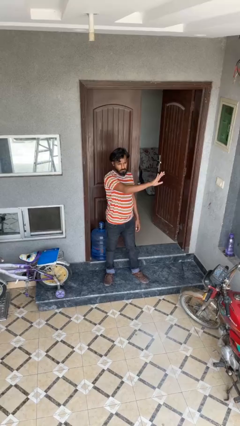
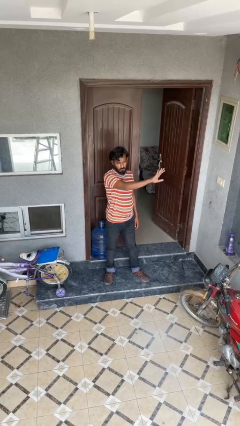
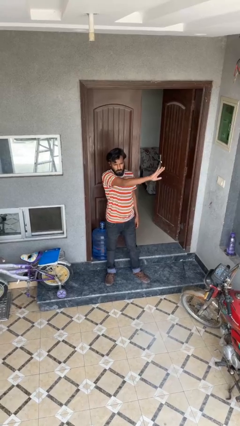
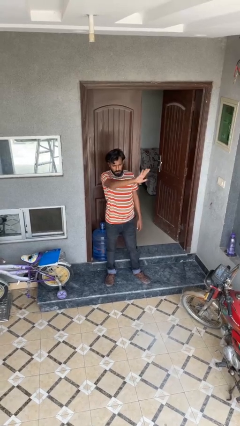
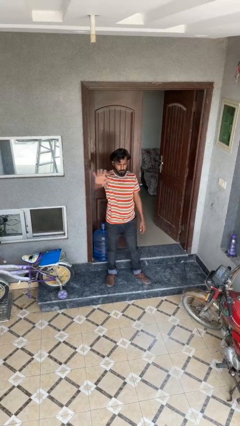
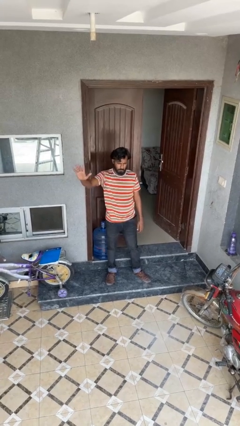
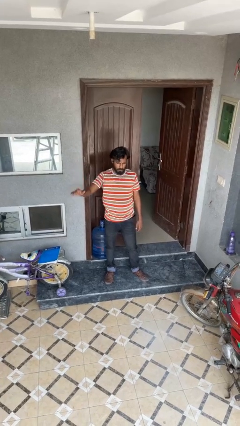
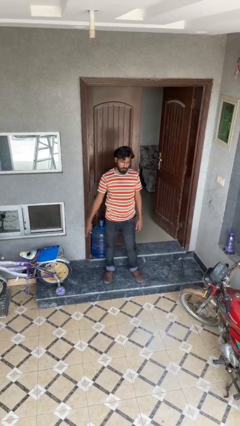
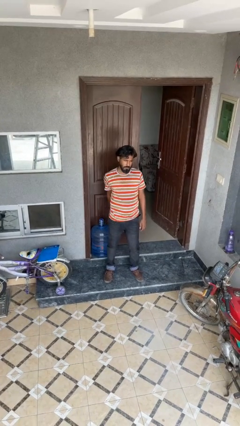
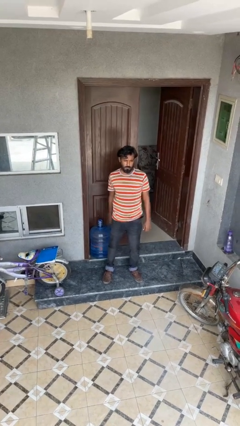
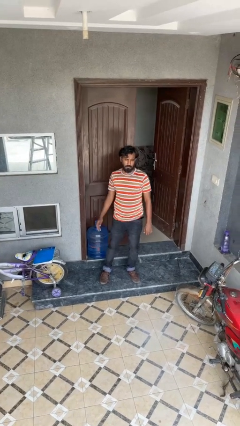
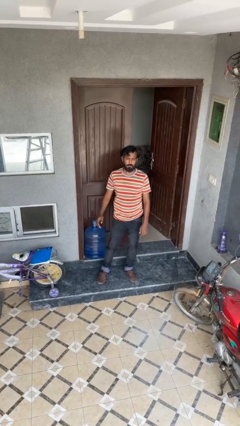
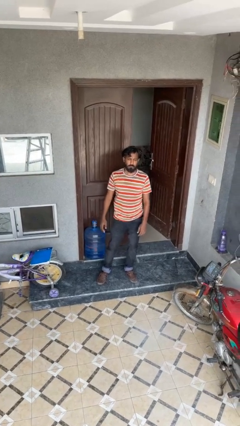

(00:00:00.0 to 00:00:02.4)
person gestures swipe right

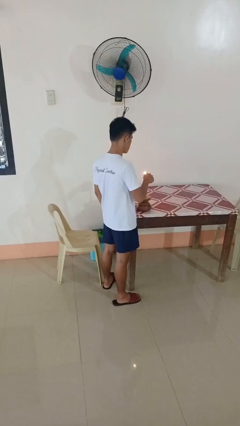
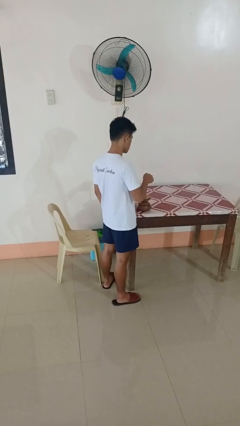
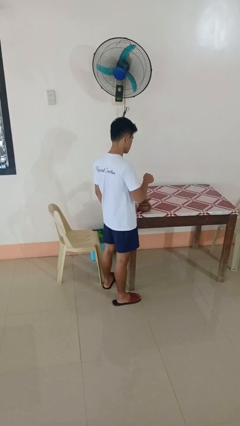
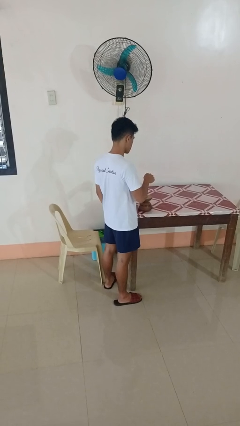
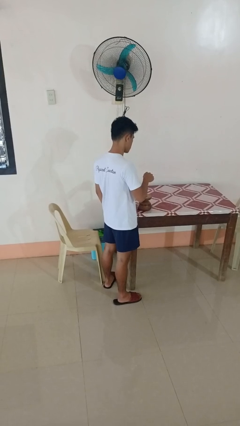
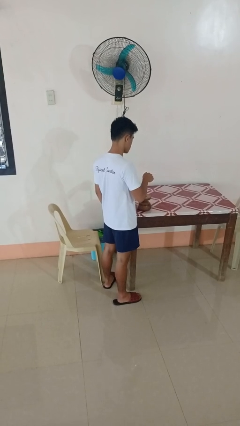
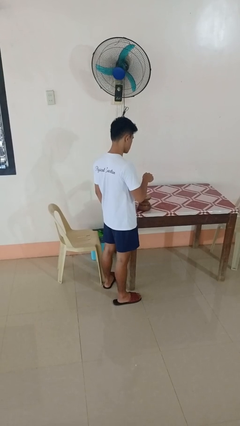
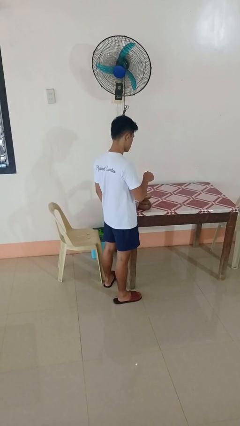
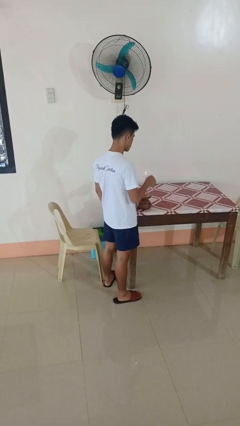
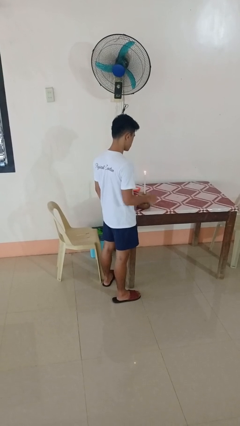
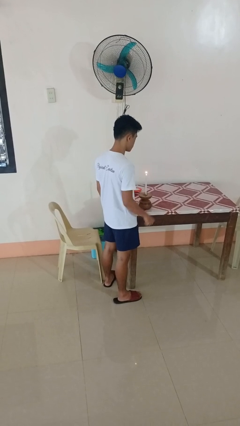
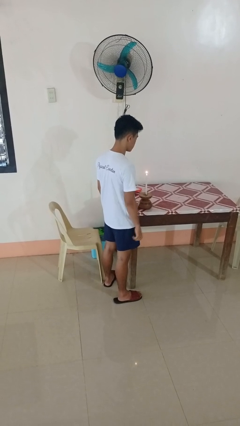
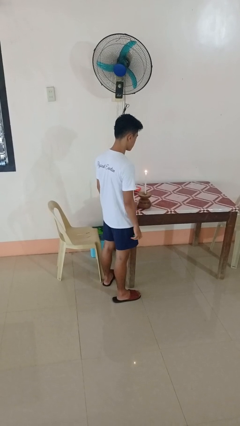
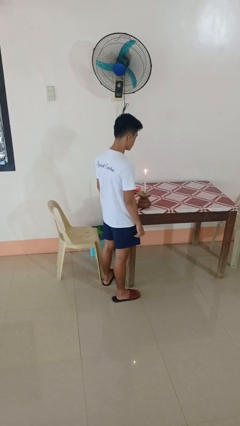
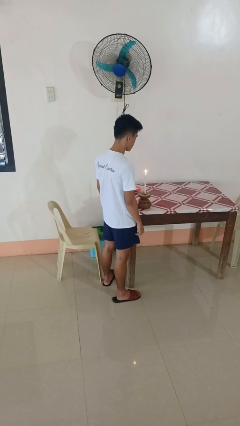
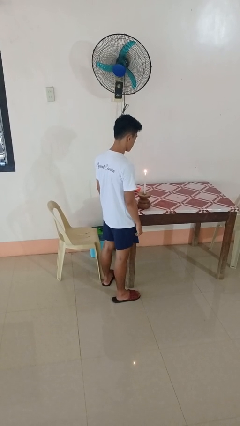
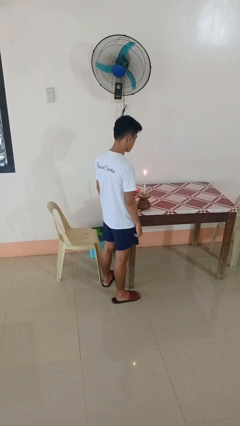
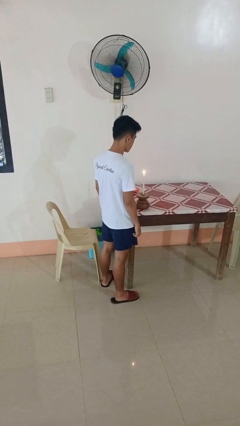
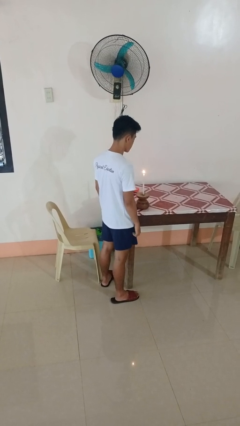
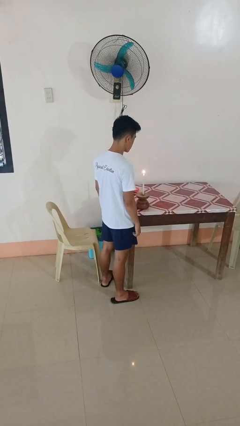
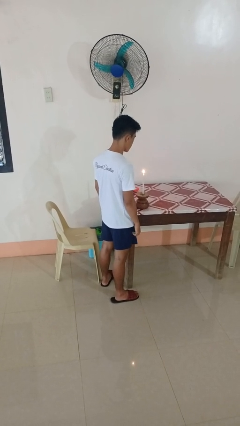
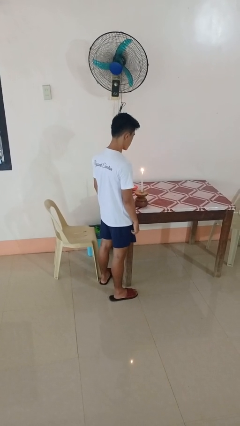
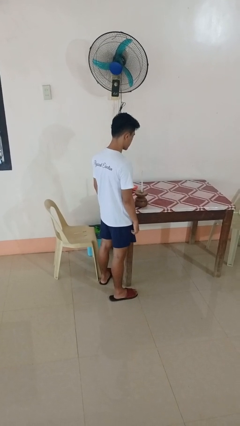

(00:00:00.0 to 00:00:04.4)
person lights candle

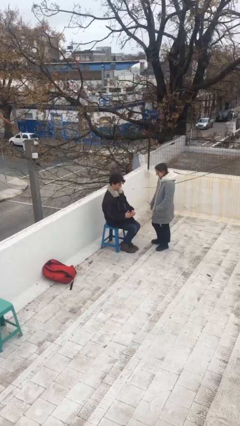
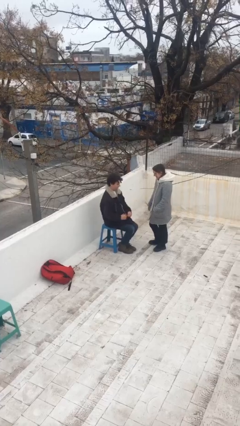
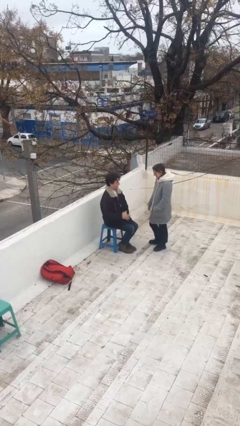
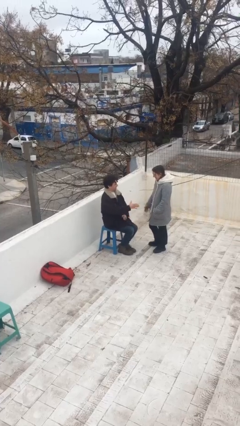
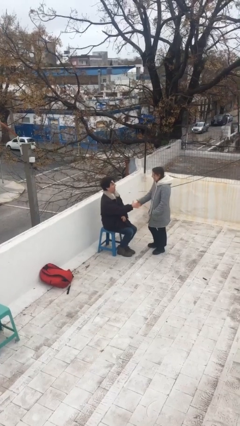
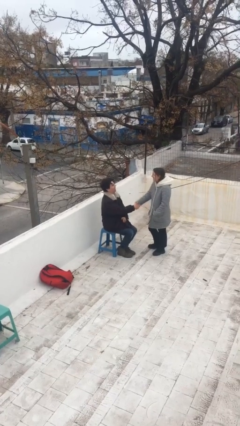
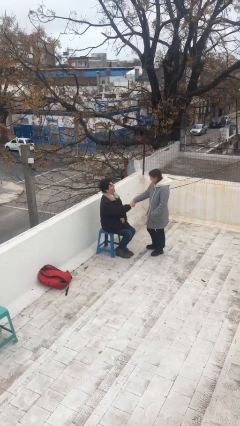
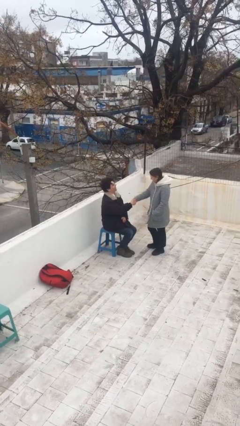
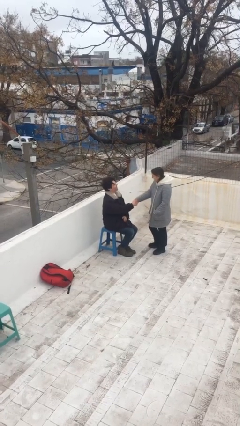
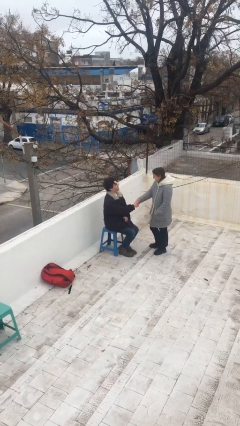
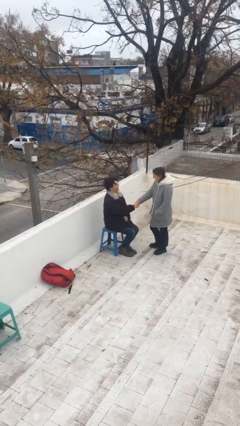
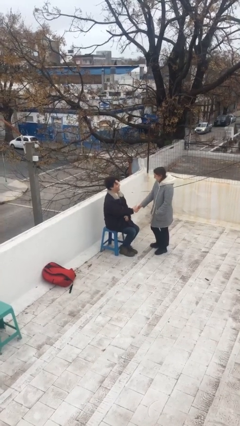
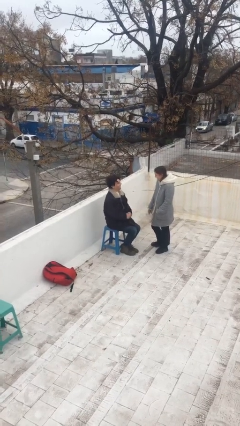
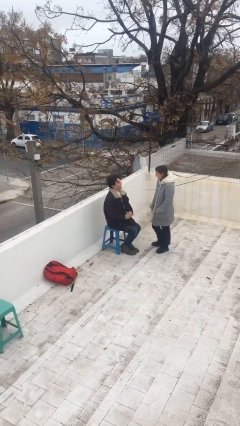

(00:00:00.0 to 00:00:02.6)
person shakes hand

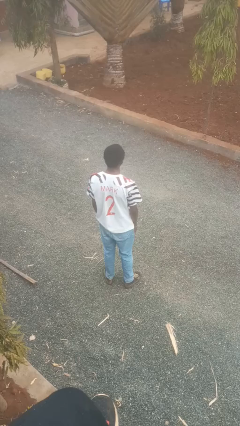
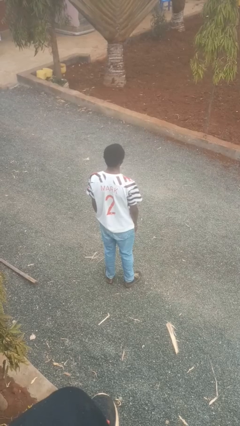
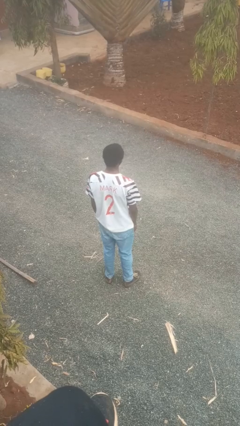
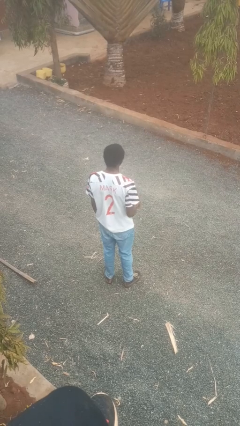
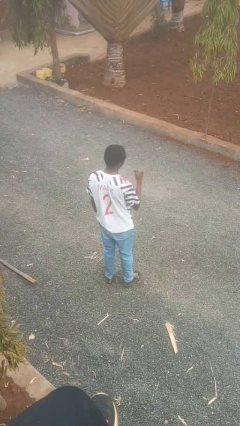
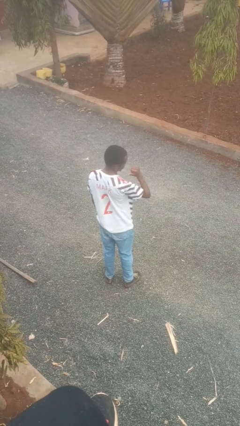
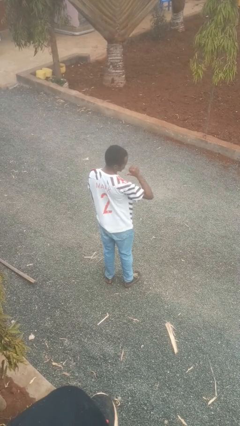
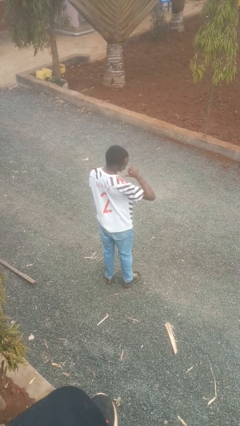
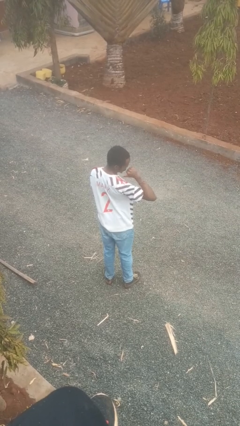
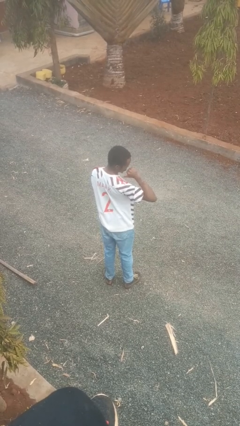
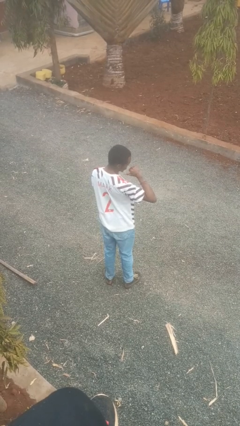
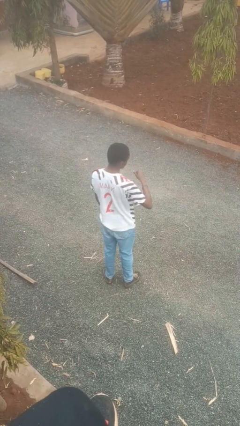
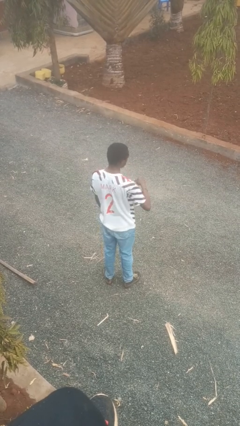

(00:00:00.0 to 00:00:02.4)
person gestures behind me

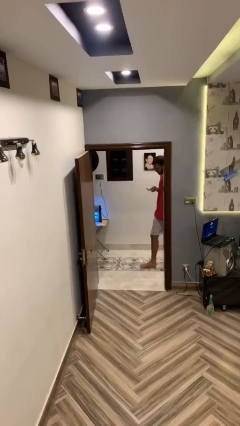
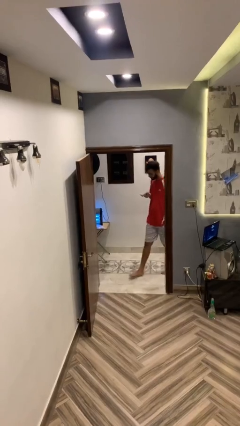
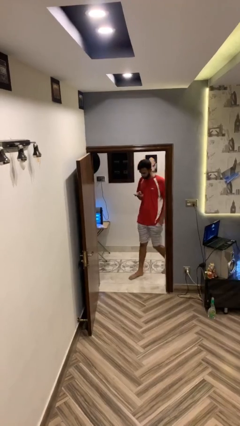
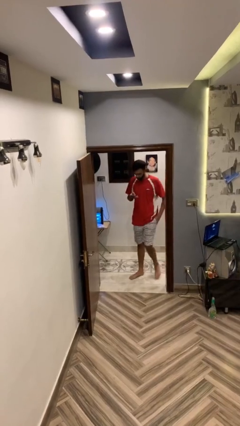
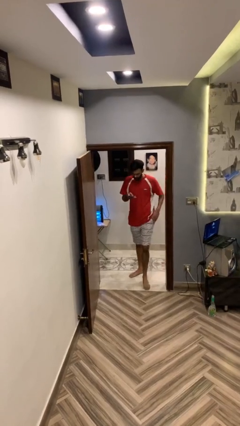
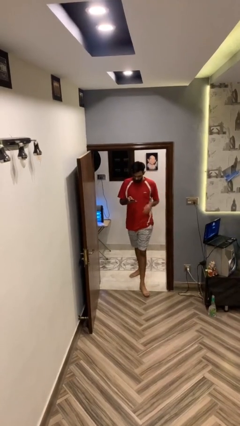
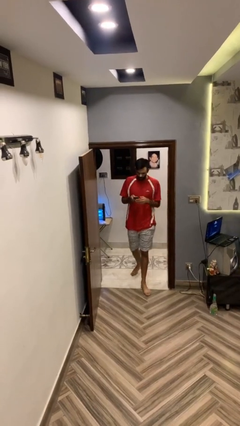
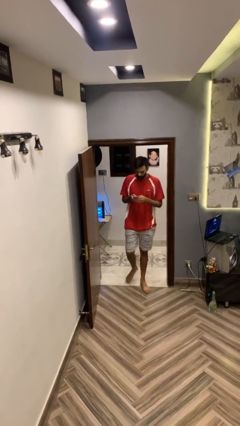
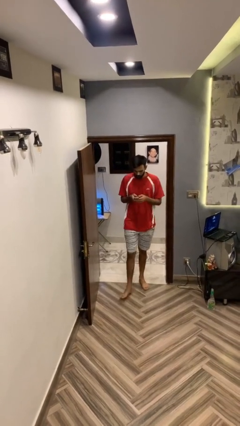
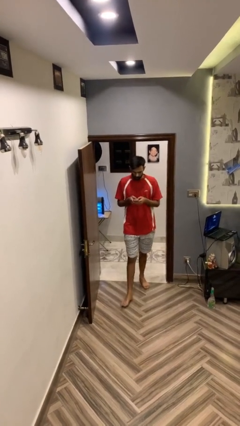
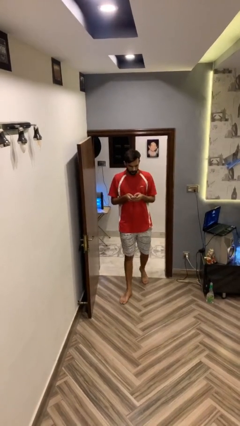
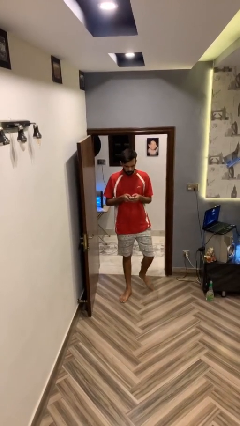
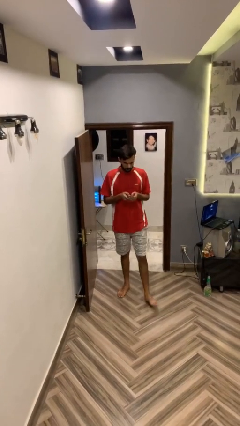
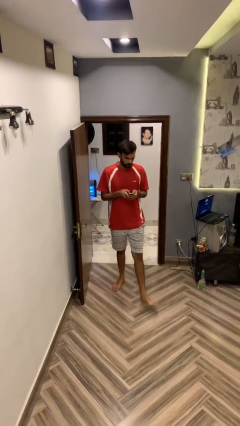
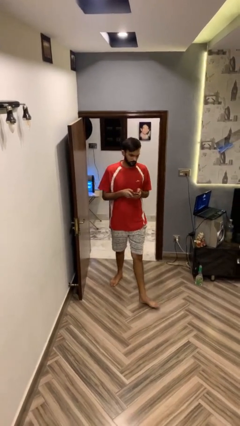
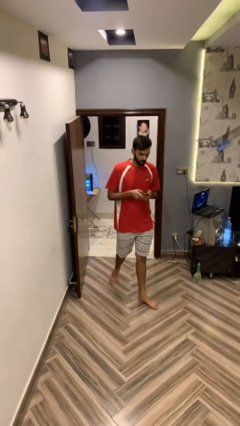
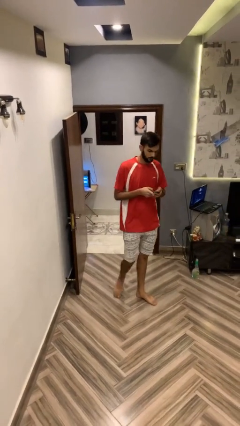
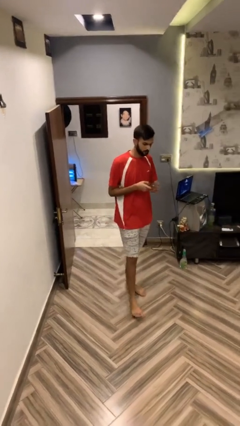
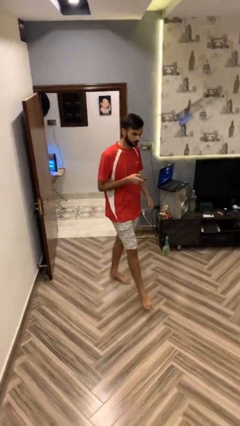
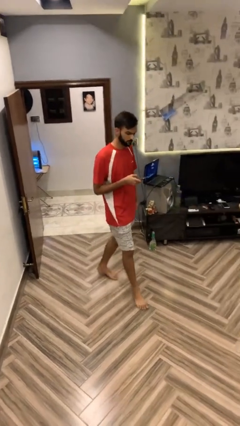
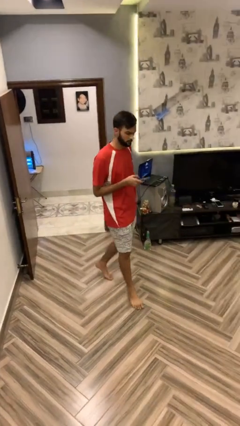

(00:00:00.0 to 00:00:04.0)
person enters scene through structure

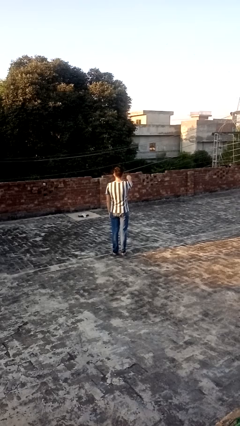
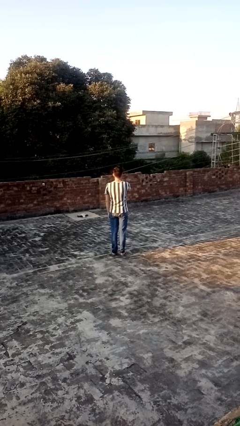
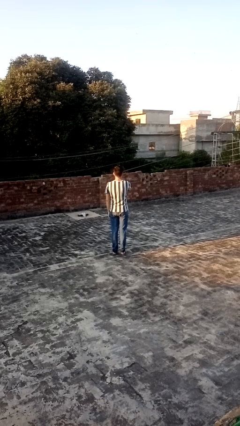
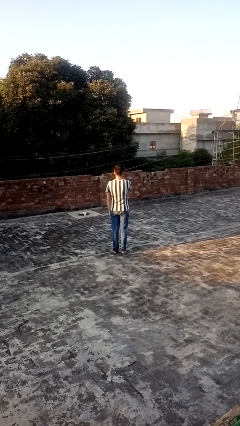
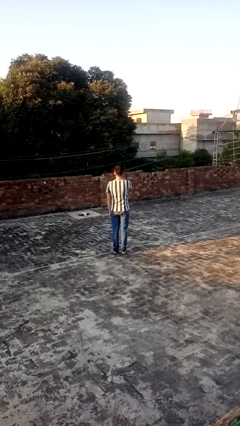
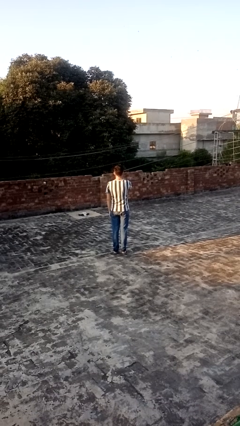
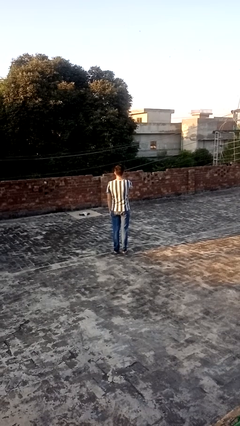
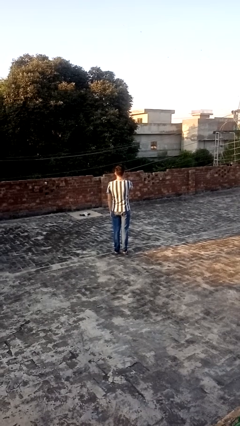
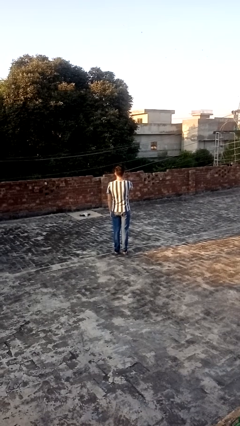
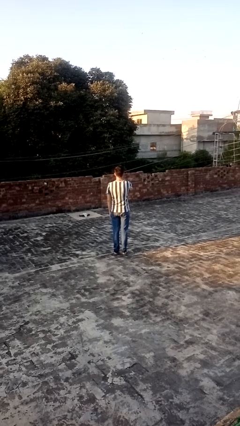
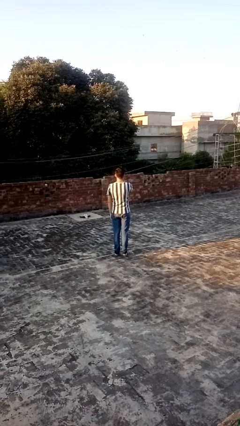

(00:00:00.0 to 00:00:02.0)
person gestures swipe down
